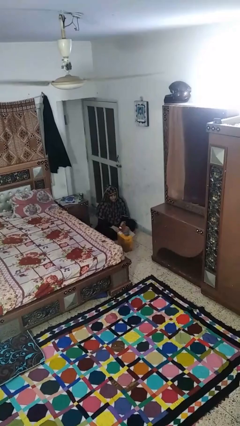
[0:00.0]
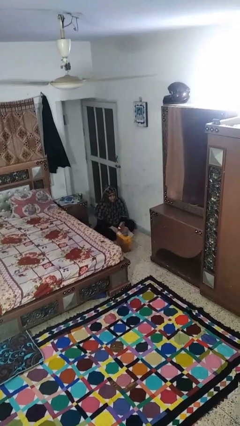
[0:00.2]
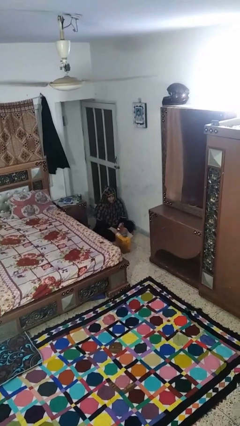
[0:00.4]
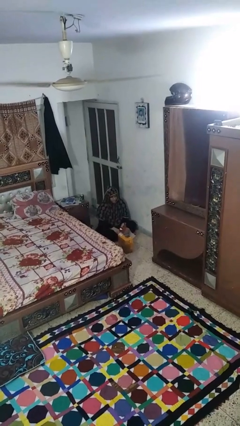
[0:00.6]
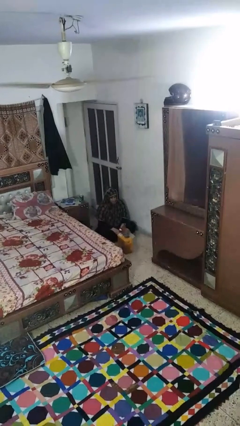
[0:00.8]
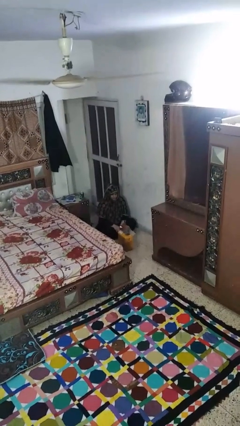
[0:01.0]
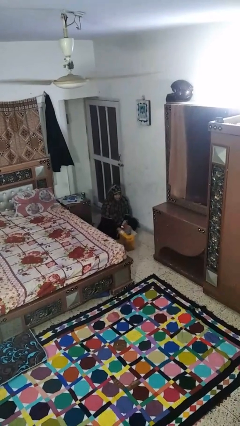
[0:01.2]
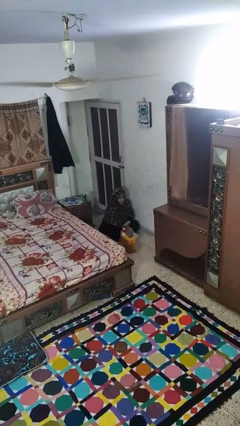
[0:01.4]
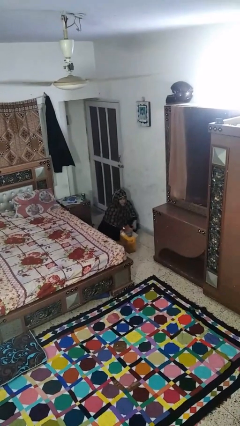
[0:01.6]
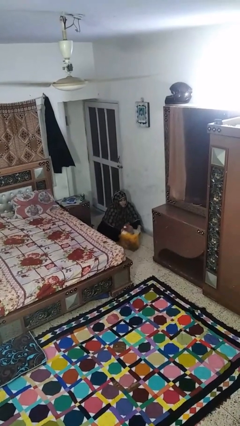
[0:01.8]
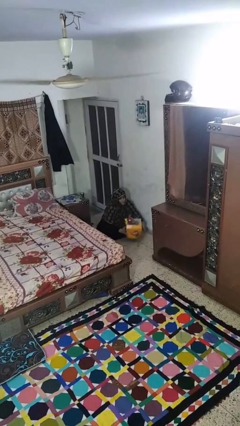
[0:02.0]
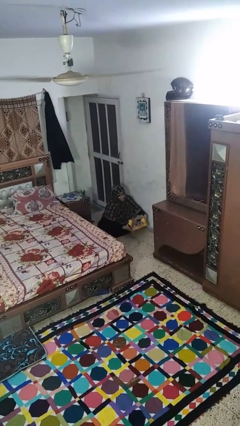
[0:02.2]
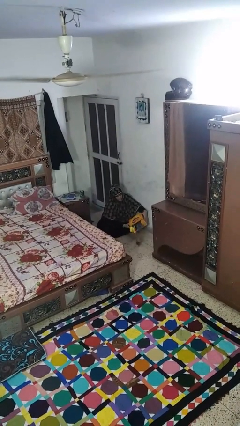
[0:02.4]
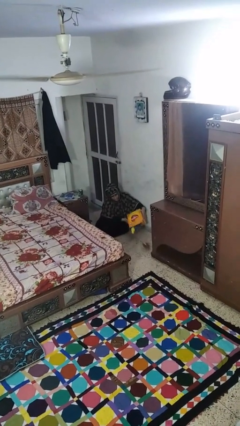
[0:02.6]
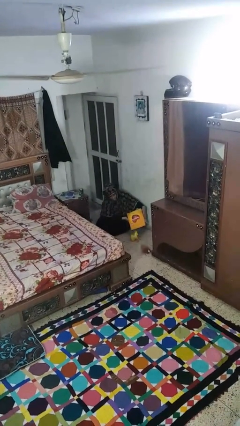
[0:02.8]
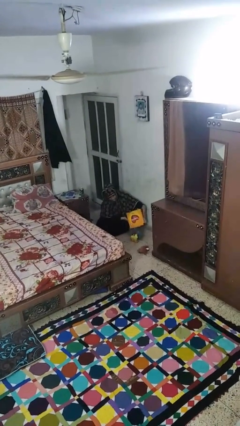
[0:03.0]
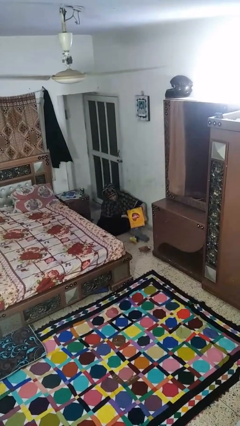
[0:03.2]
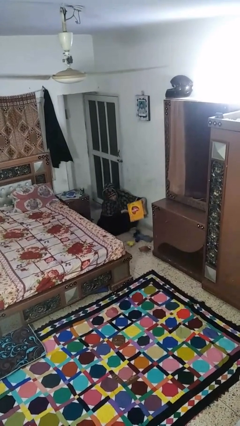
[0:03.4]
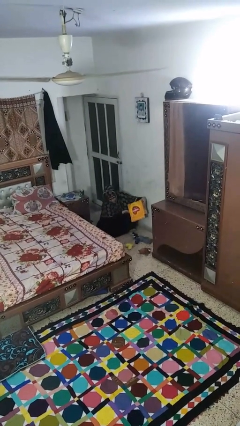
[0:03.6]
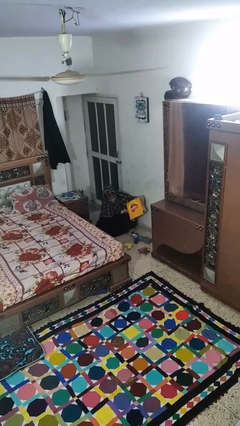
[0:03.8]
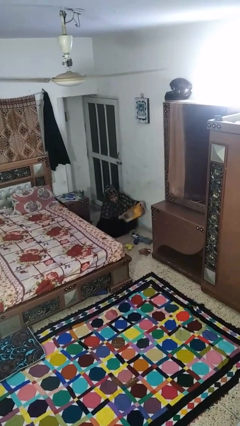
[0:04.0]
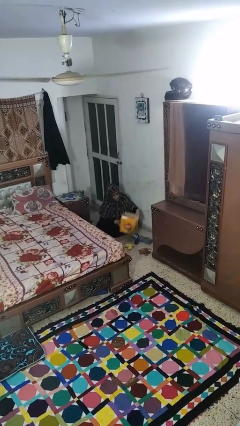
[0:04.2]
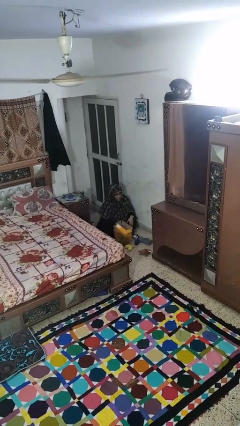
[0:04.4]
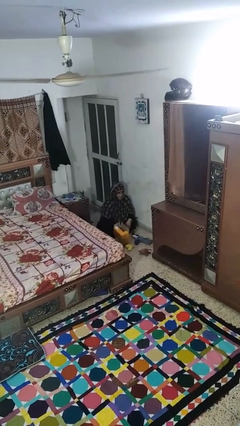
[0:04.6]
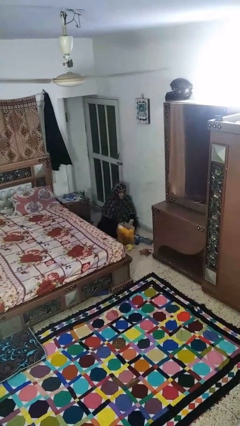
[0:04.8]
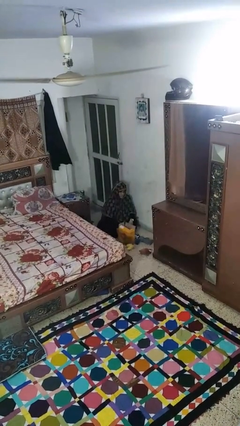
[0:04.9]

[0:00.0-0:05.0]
person unloads box onto floor

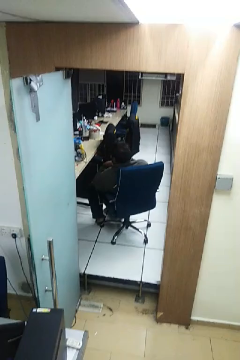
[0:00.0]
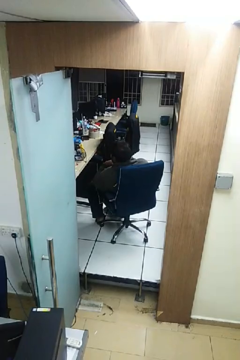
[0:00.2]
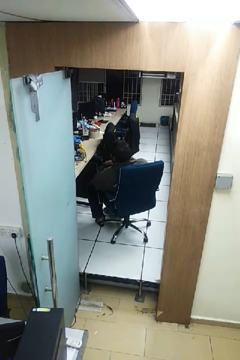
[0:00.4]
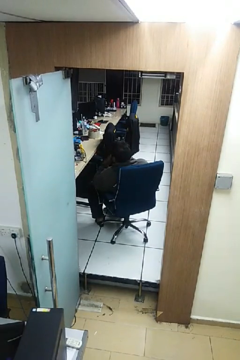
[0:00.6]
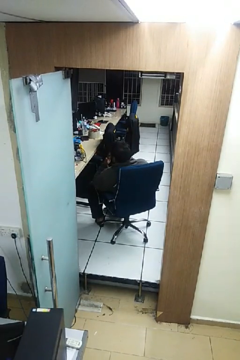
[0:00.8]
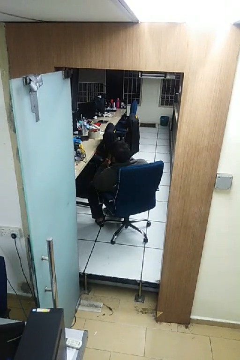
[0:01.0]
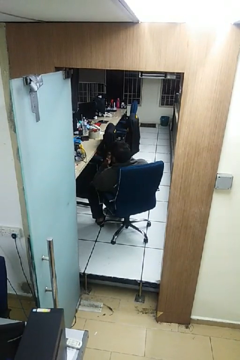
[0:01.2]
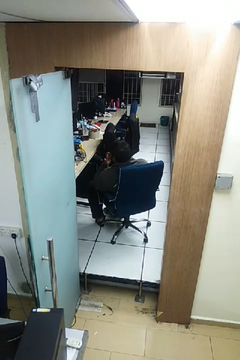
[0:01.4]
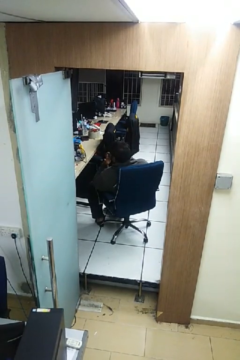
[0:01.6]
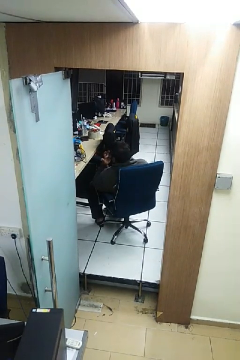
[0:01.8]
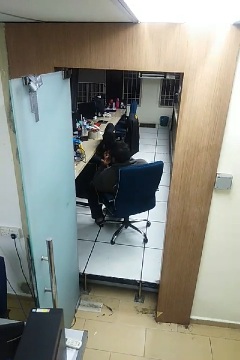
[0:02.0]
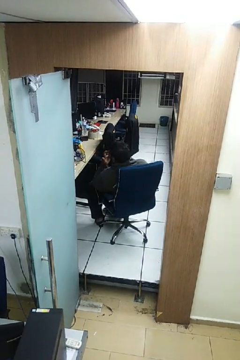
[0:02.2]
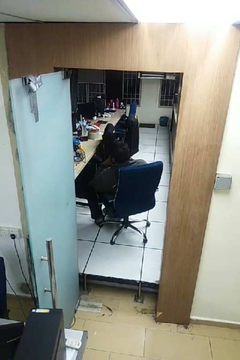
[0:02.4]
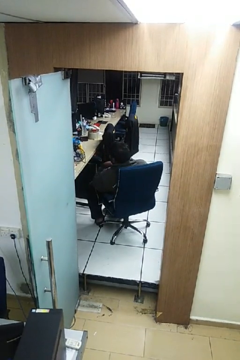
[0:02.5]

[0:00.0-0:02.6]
person licks fingers

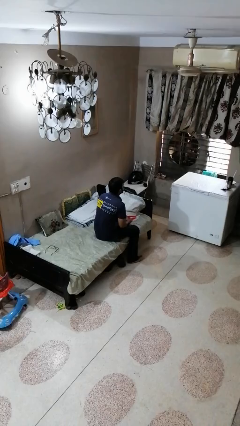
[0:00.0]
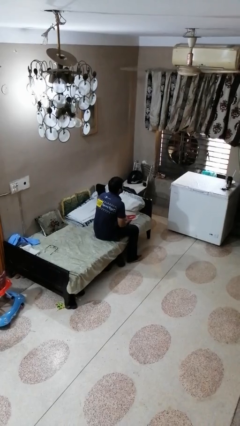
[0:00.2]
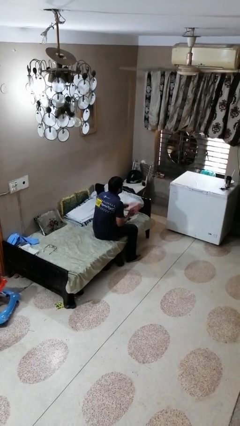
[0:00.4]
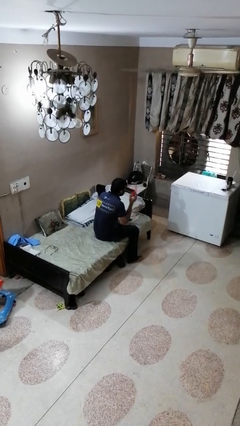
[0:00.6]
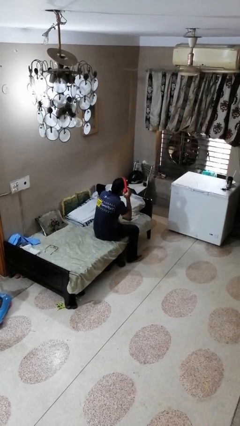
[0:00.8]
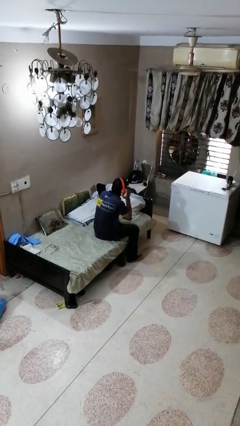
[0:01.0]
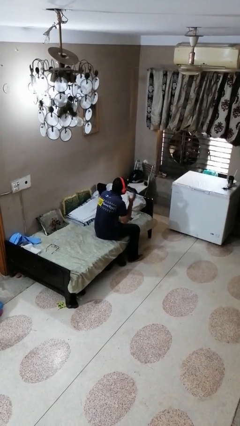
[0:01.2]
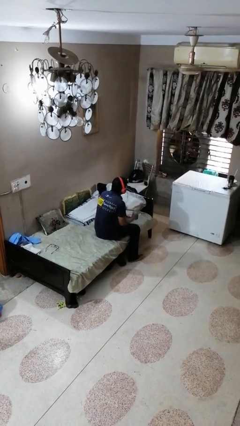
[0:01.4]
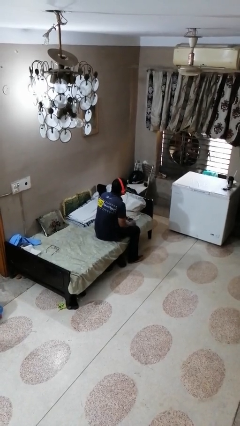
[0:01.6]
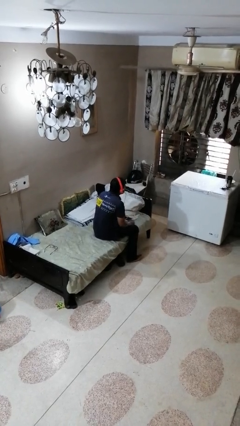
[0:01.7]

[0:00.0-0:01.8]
person puts on headphones

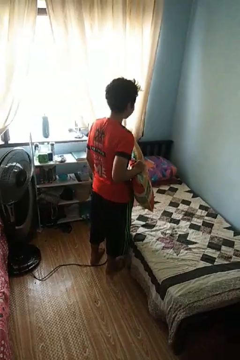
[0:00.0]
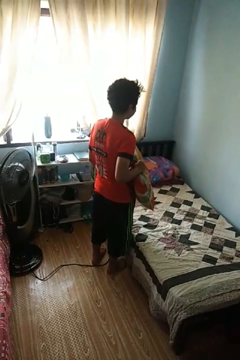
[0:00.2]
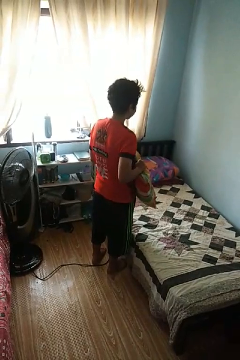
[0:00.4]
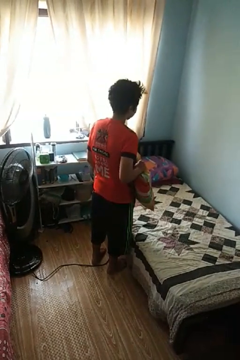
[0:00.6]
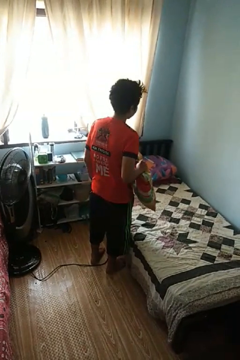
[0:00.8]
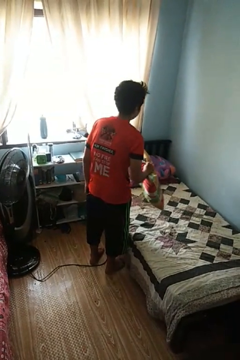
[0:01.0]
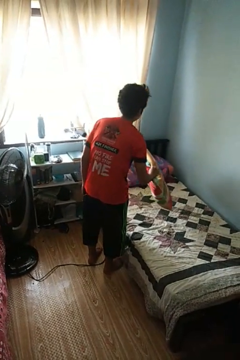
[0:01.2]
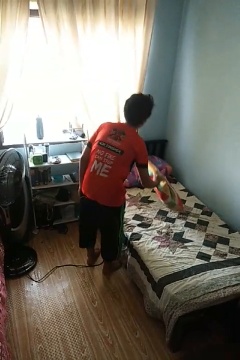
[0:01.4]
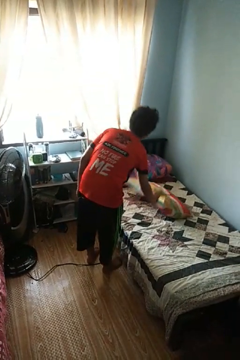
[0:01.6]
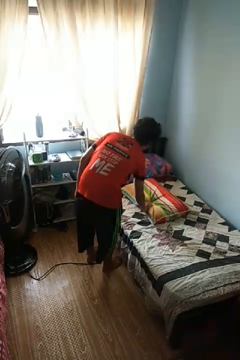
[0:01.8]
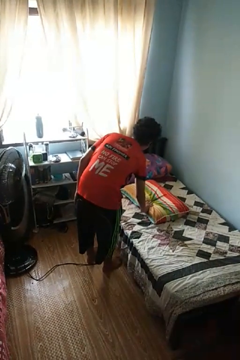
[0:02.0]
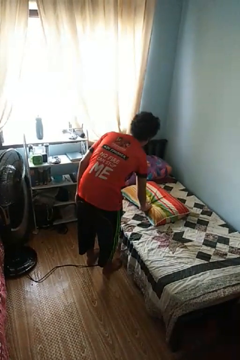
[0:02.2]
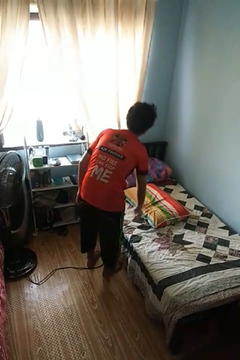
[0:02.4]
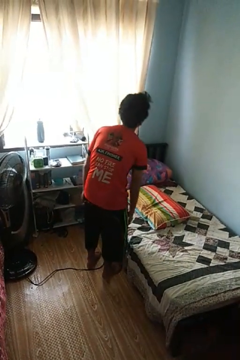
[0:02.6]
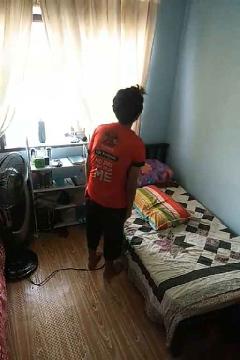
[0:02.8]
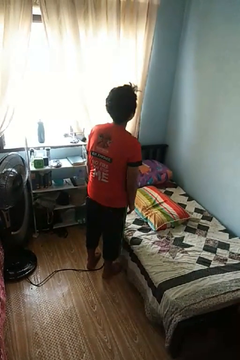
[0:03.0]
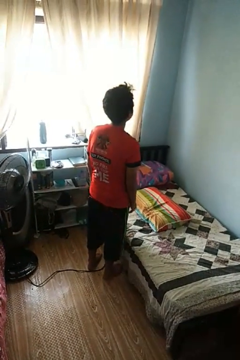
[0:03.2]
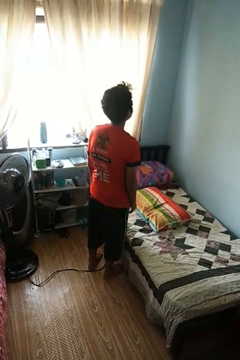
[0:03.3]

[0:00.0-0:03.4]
person puts down object on bed

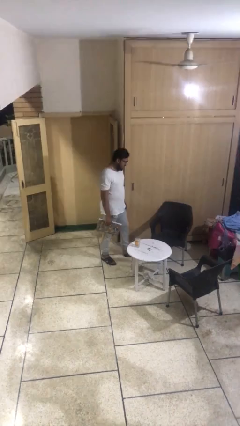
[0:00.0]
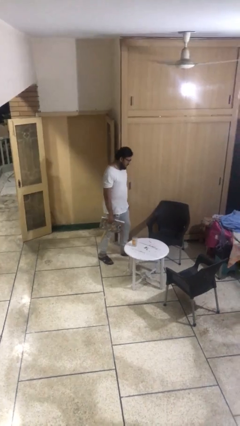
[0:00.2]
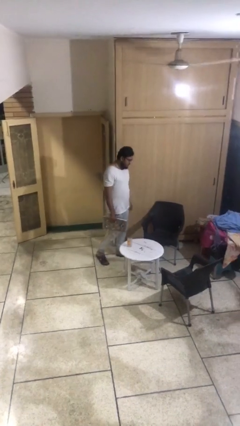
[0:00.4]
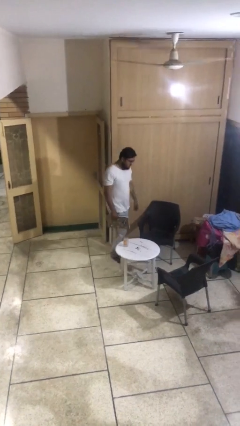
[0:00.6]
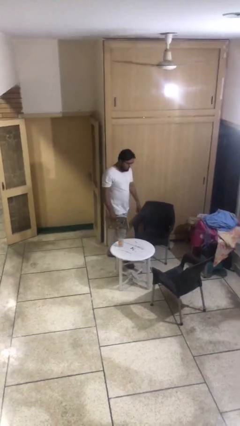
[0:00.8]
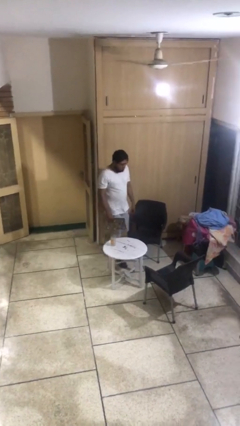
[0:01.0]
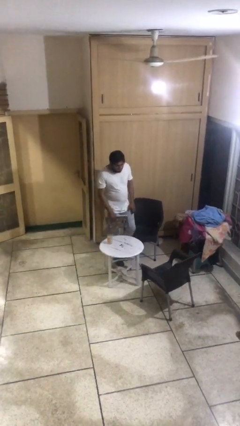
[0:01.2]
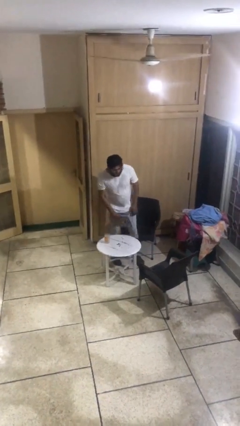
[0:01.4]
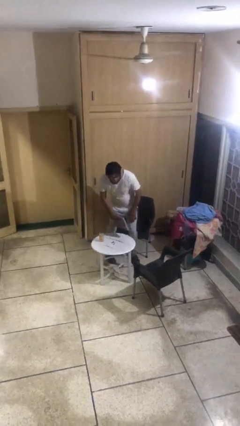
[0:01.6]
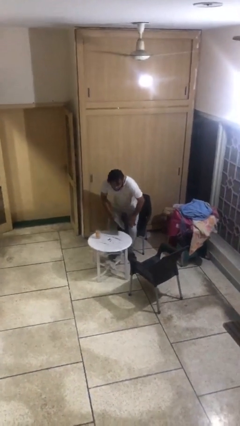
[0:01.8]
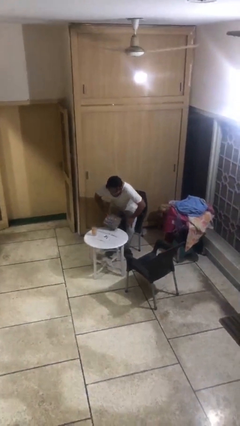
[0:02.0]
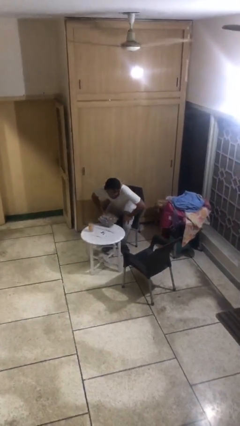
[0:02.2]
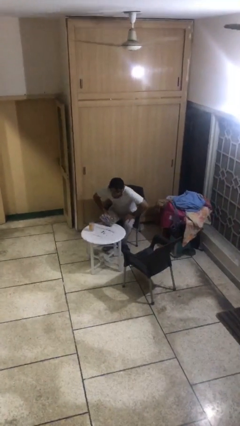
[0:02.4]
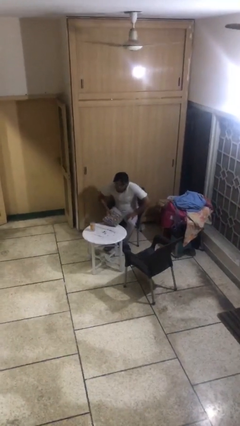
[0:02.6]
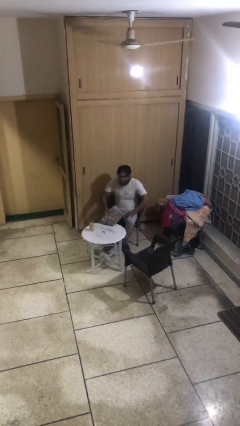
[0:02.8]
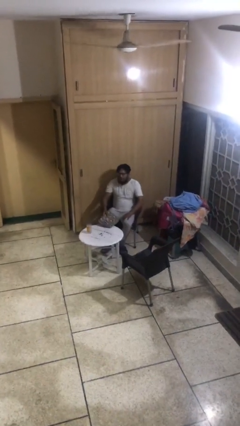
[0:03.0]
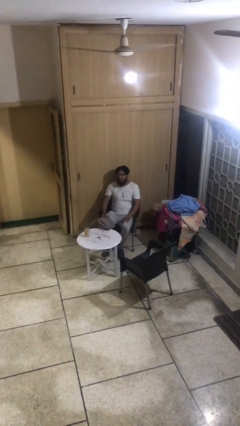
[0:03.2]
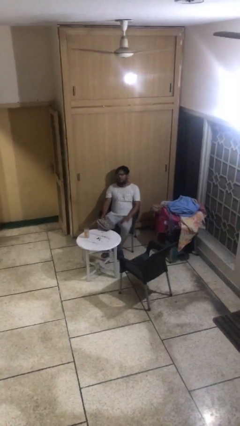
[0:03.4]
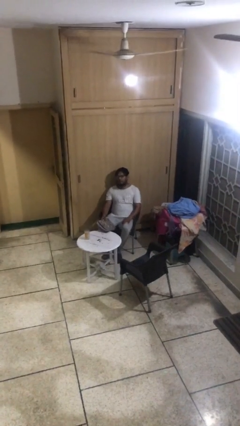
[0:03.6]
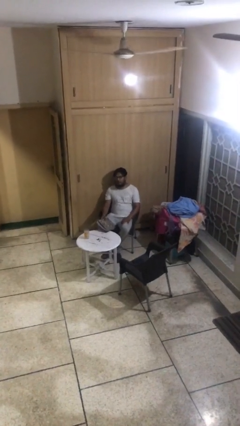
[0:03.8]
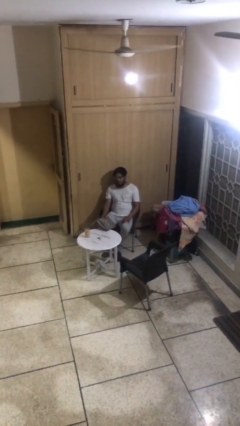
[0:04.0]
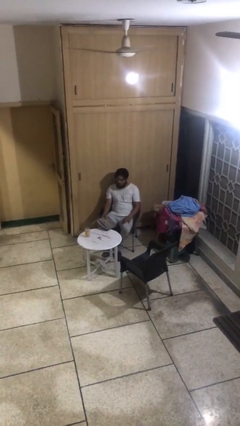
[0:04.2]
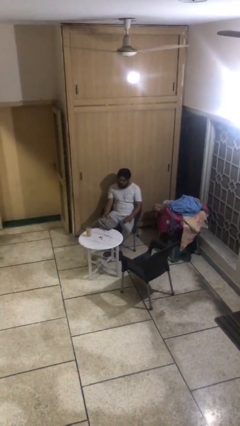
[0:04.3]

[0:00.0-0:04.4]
person sits down

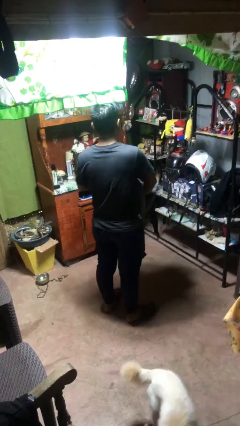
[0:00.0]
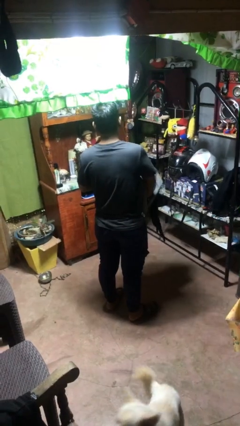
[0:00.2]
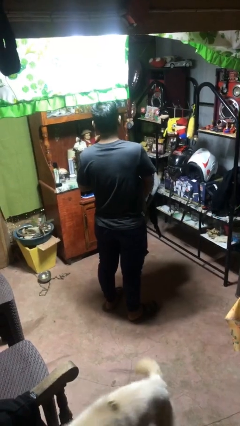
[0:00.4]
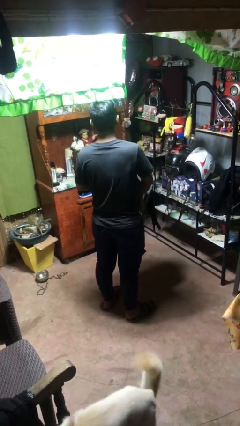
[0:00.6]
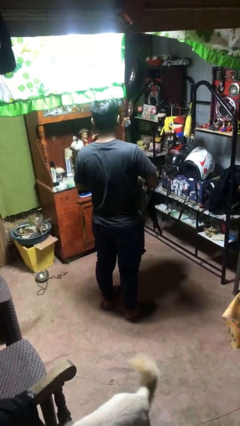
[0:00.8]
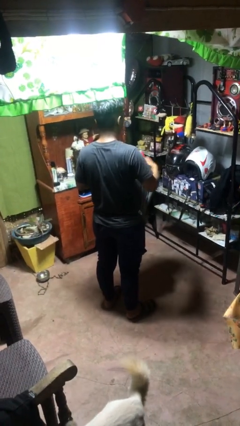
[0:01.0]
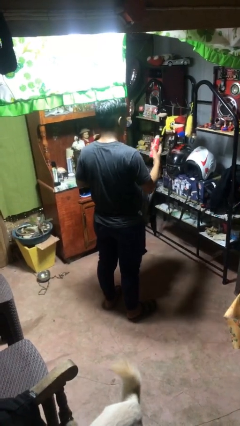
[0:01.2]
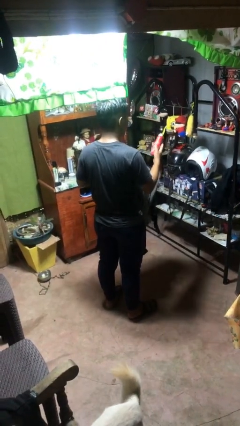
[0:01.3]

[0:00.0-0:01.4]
person takes object from bag

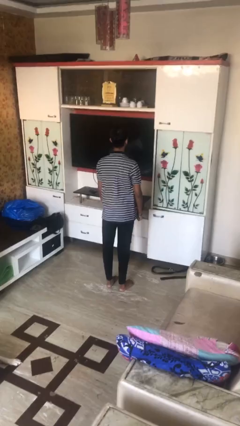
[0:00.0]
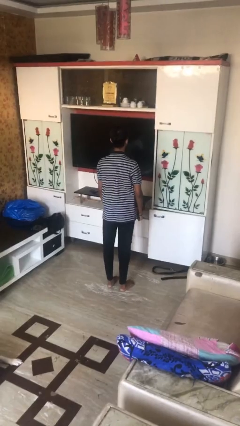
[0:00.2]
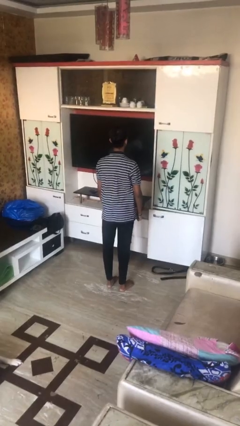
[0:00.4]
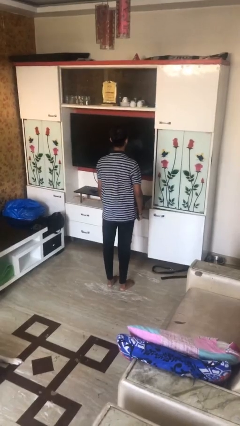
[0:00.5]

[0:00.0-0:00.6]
person wiggles hips
